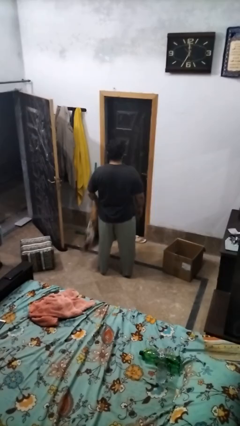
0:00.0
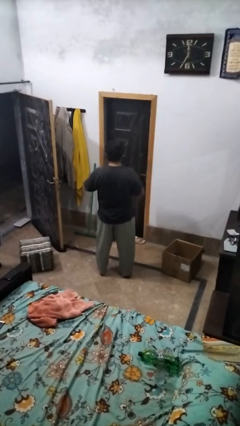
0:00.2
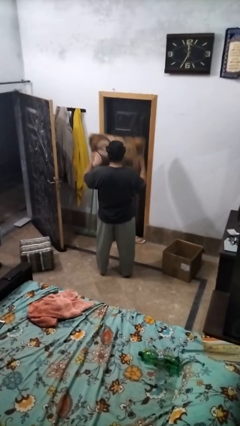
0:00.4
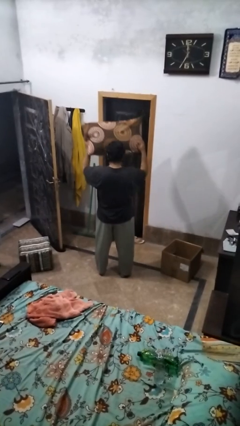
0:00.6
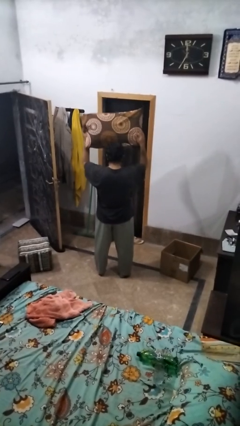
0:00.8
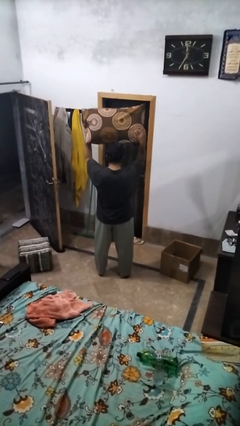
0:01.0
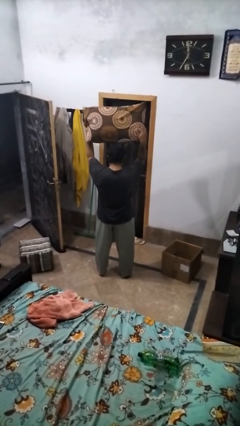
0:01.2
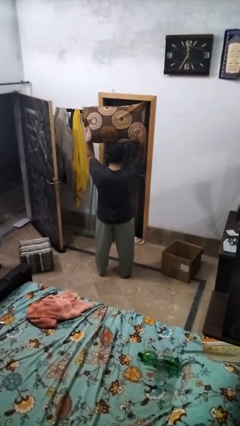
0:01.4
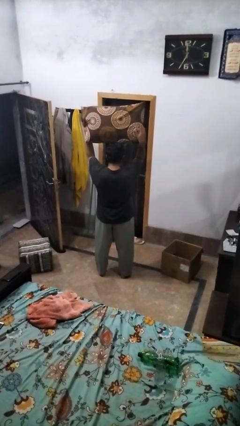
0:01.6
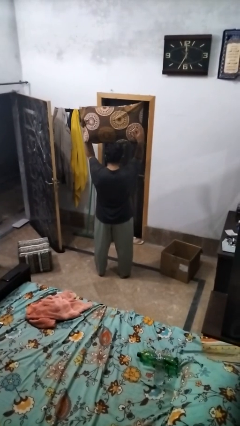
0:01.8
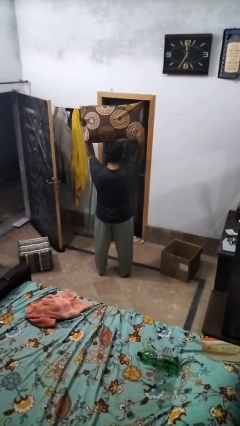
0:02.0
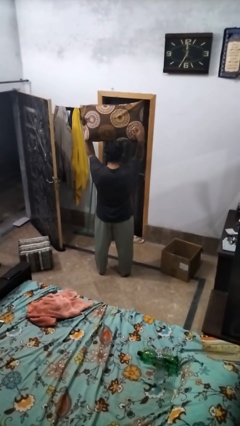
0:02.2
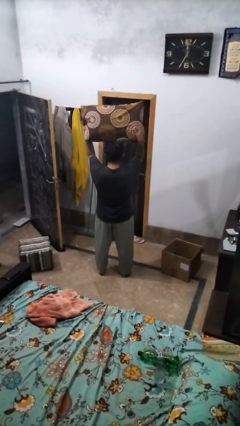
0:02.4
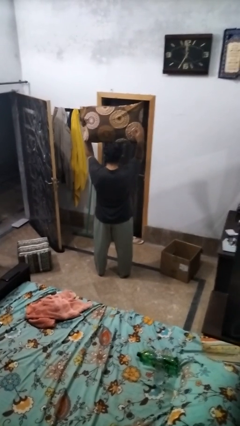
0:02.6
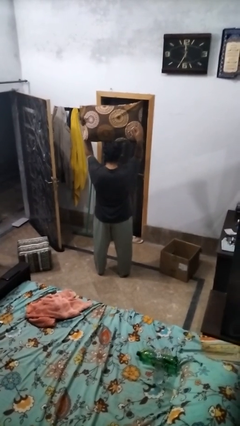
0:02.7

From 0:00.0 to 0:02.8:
person holds object above head

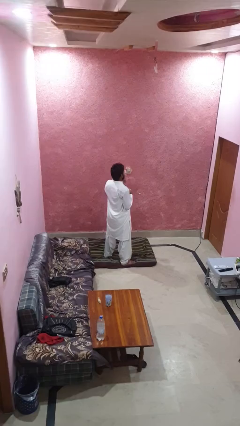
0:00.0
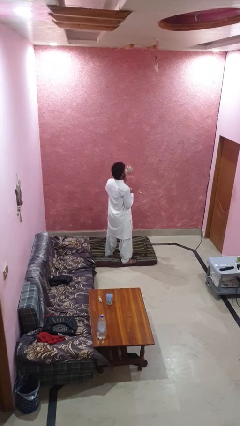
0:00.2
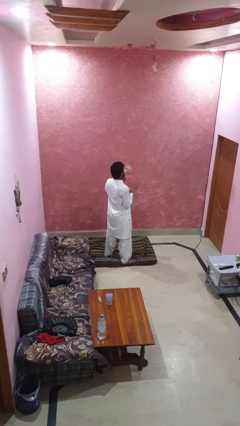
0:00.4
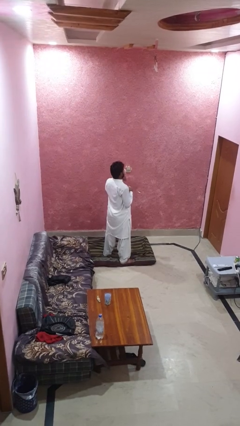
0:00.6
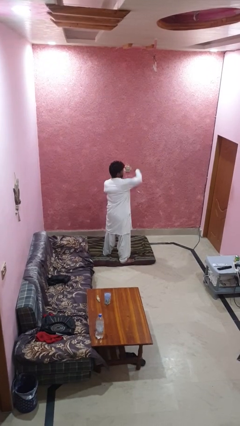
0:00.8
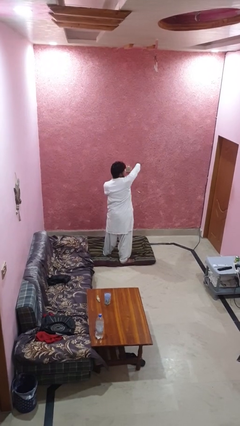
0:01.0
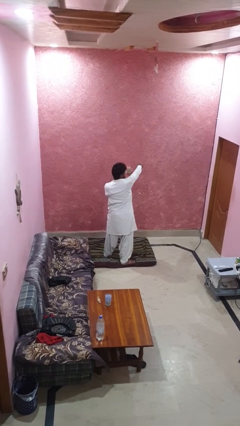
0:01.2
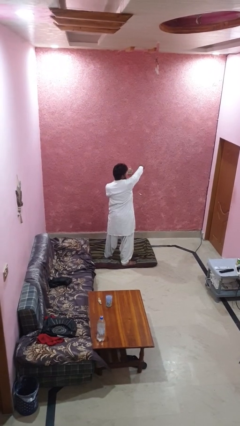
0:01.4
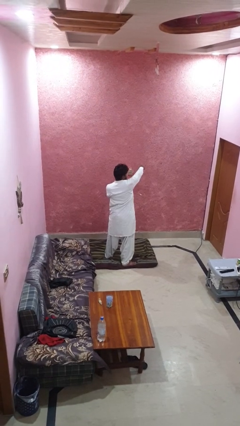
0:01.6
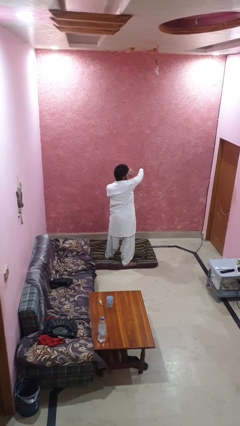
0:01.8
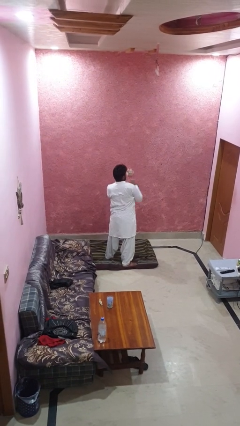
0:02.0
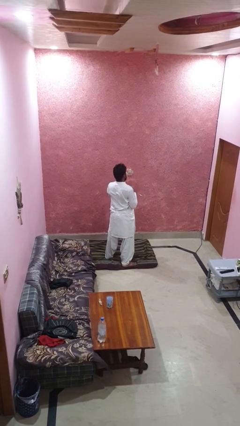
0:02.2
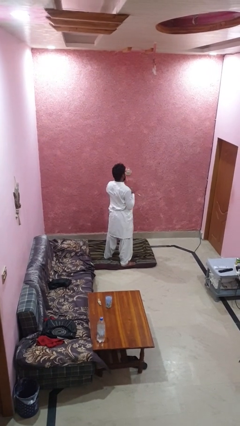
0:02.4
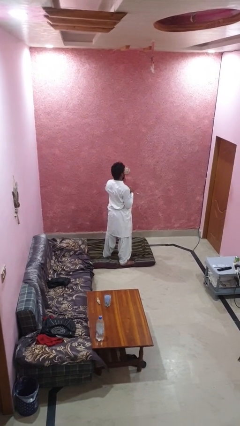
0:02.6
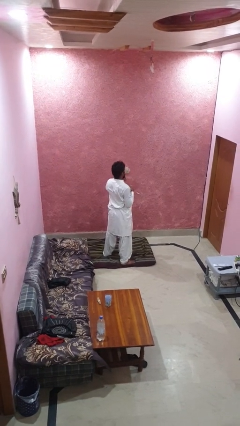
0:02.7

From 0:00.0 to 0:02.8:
person punches

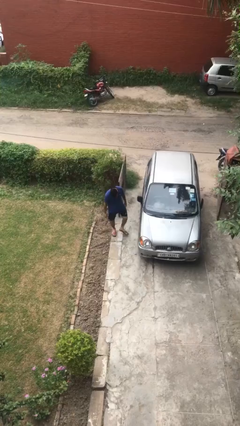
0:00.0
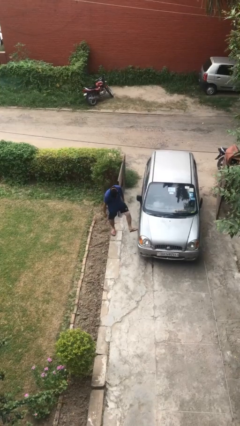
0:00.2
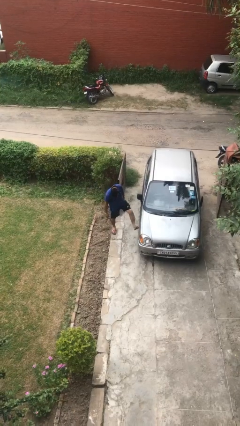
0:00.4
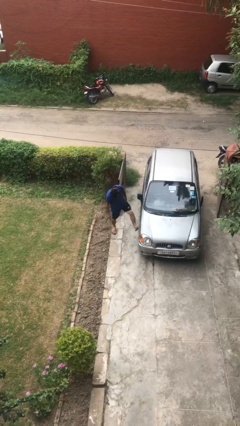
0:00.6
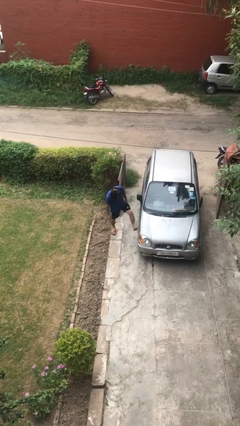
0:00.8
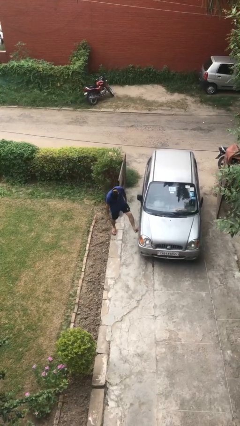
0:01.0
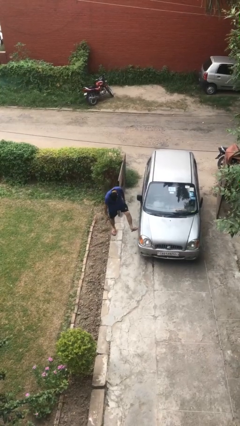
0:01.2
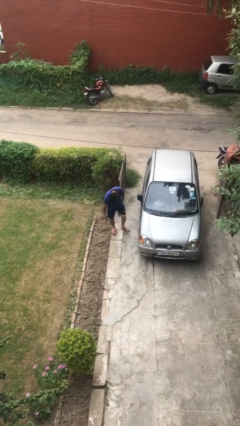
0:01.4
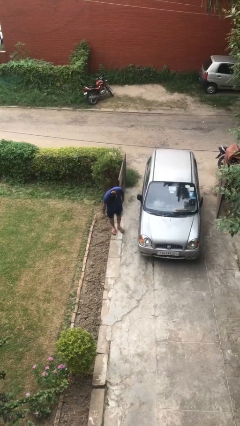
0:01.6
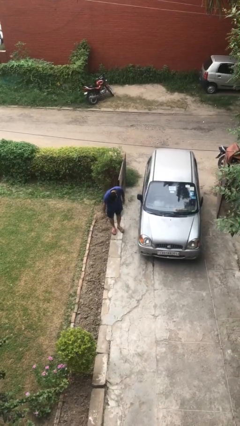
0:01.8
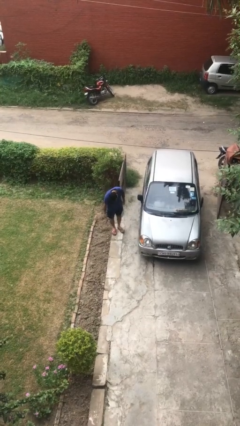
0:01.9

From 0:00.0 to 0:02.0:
person kicks car tires

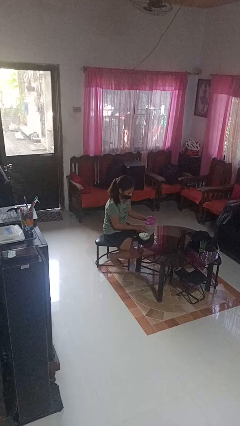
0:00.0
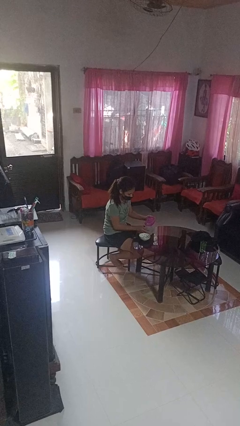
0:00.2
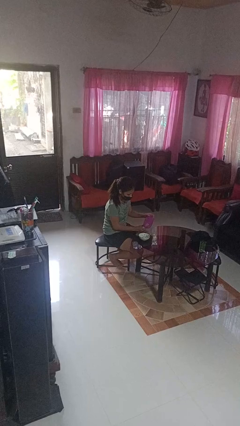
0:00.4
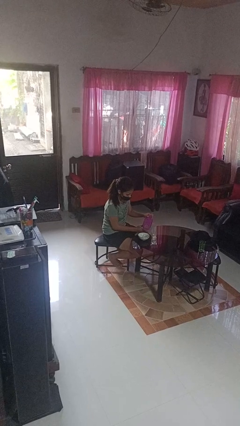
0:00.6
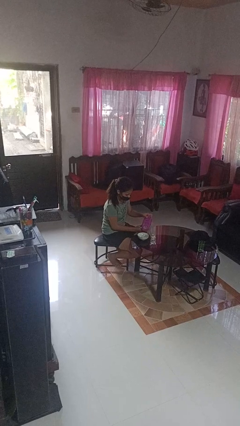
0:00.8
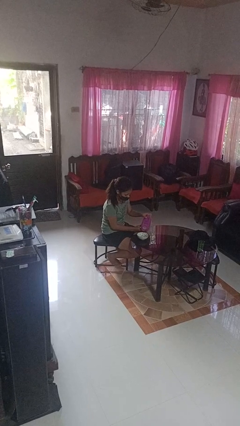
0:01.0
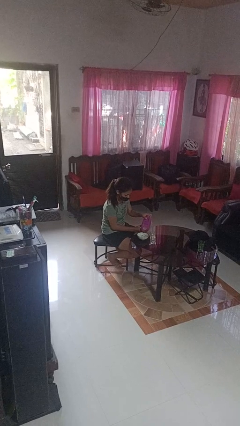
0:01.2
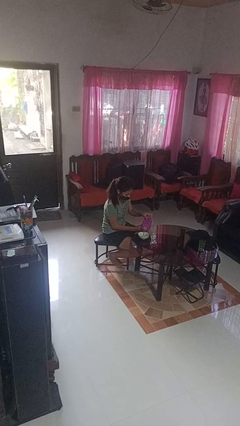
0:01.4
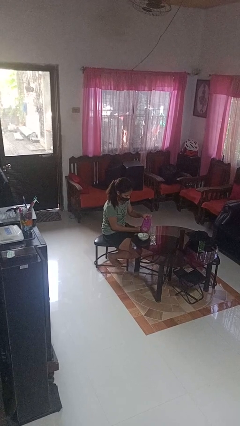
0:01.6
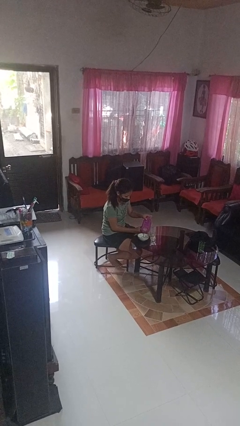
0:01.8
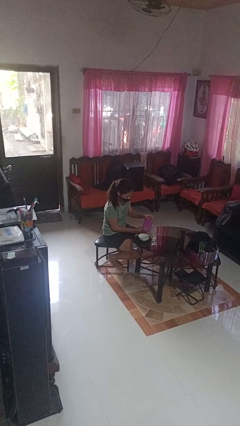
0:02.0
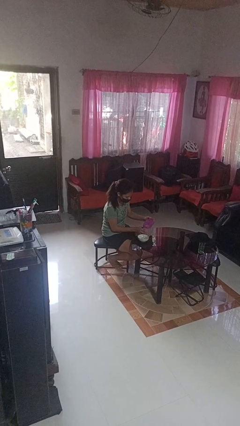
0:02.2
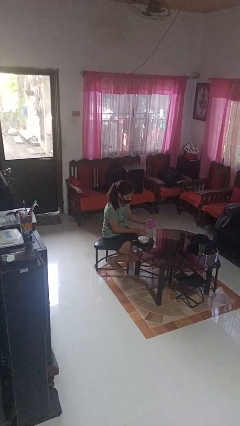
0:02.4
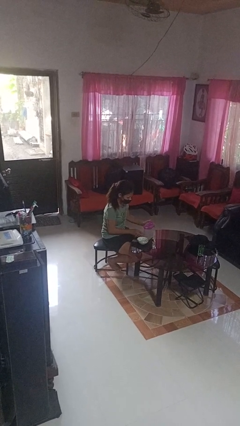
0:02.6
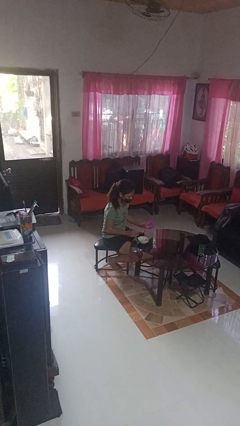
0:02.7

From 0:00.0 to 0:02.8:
person pours into bowl

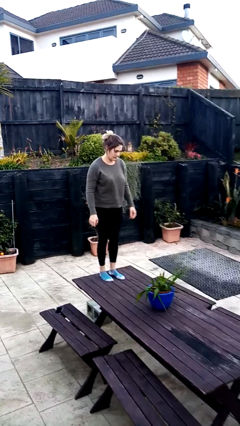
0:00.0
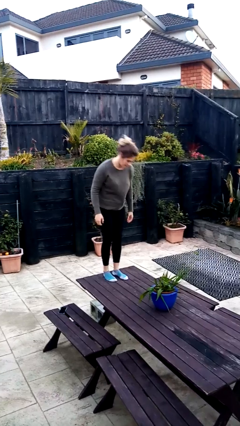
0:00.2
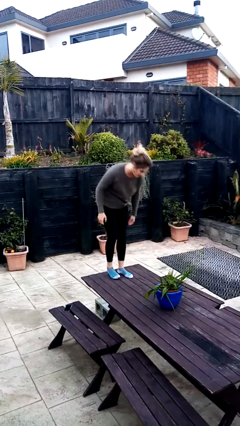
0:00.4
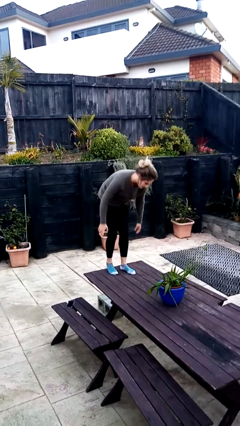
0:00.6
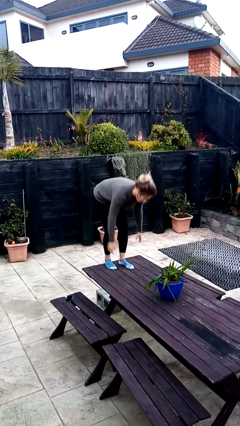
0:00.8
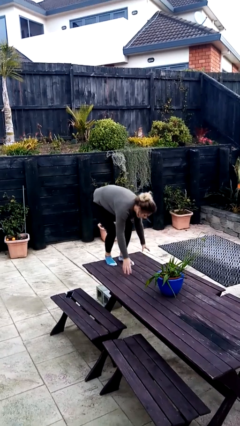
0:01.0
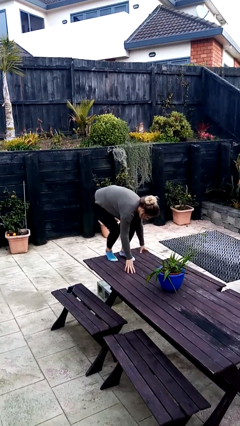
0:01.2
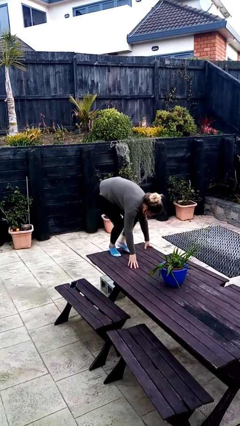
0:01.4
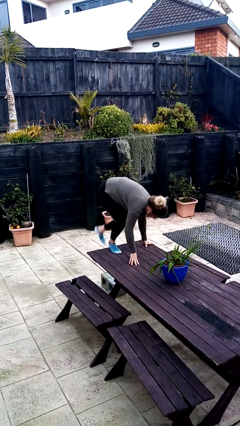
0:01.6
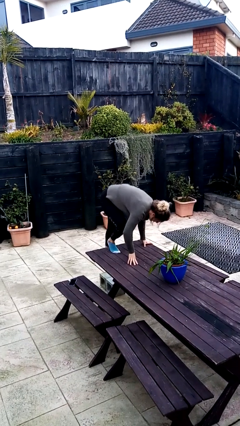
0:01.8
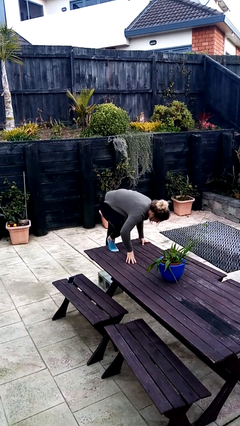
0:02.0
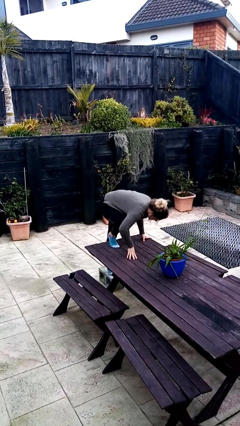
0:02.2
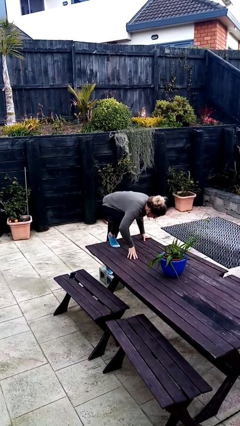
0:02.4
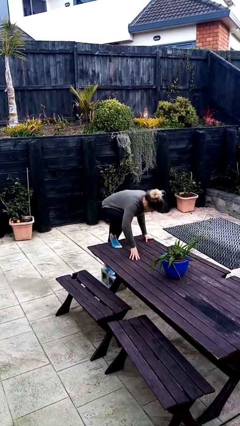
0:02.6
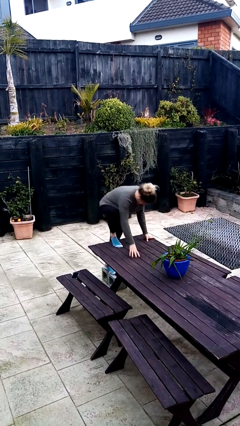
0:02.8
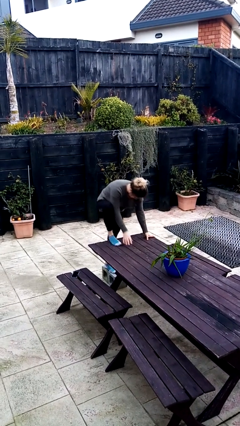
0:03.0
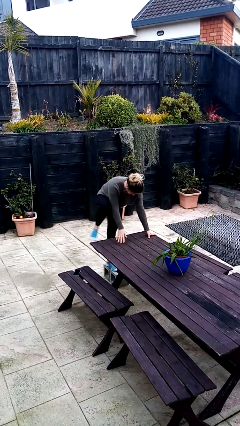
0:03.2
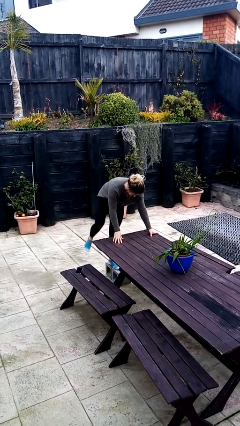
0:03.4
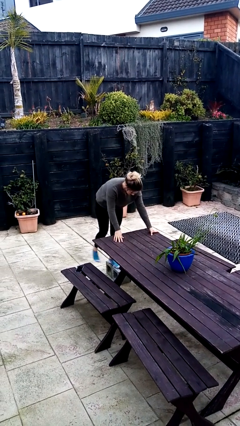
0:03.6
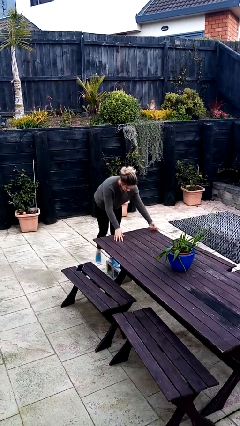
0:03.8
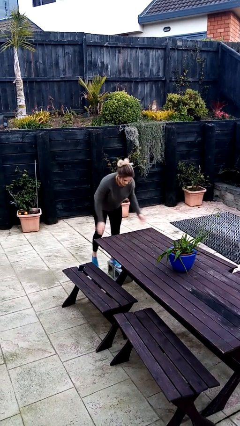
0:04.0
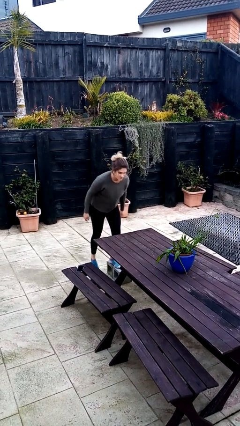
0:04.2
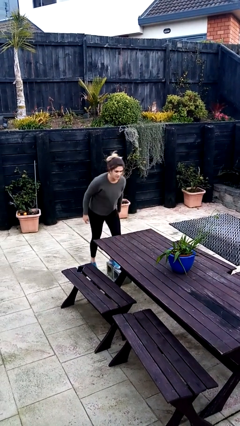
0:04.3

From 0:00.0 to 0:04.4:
person climbs off table

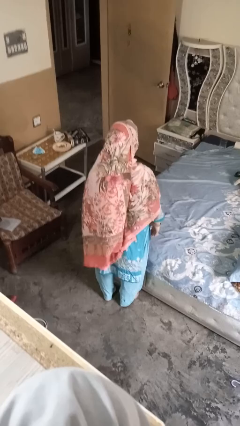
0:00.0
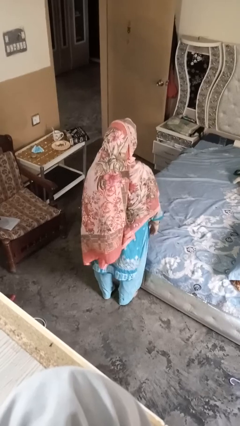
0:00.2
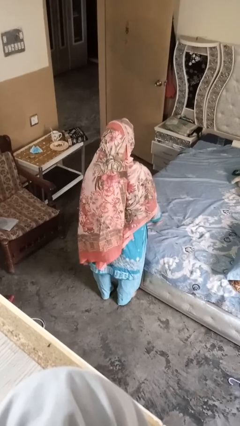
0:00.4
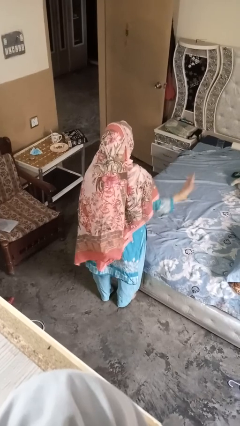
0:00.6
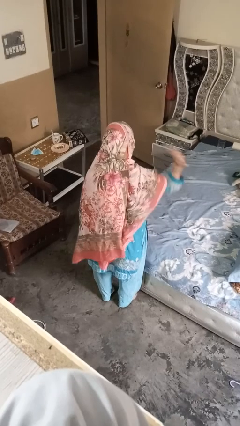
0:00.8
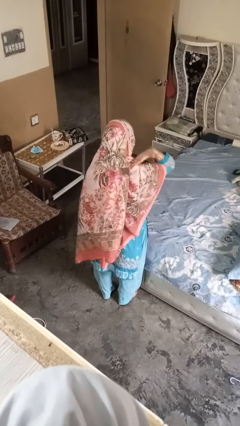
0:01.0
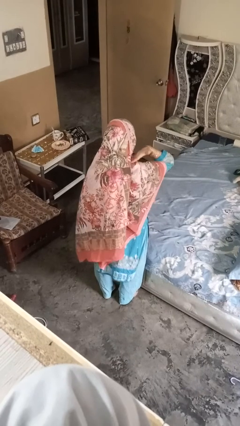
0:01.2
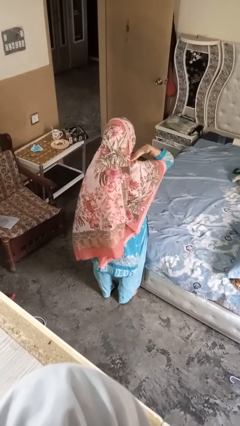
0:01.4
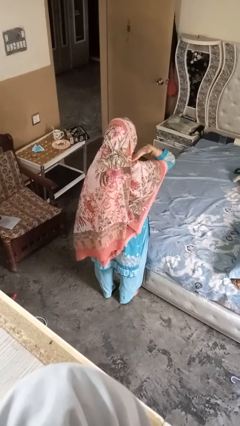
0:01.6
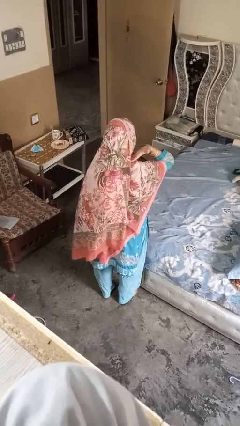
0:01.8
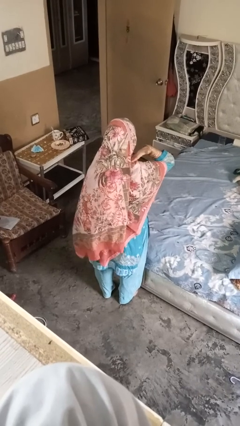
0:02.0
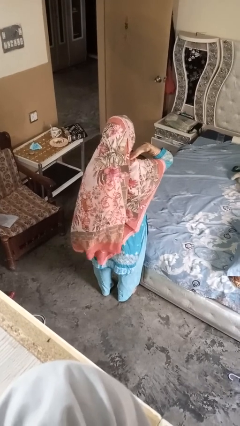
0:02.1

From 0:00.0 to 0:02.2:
person gestures cut

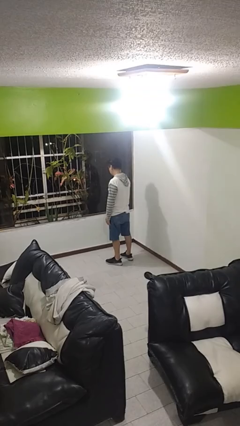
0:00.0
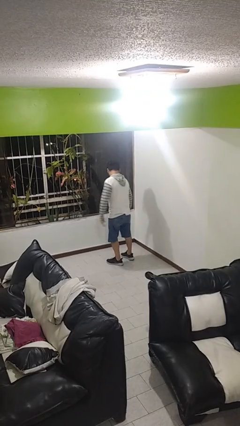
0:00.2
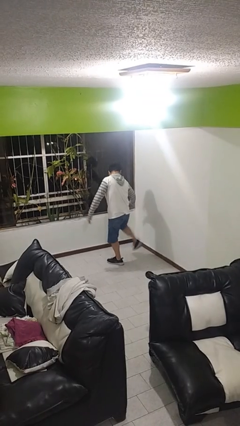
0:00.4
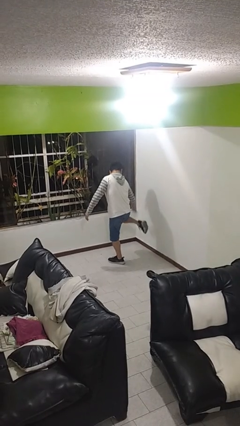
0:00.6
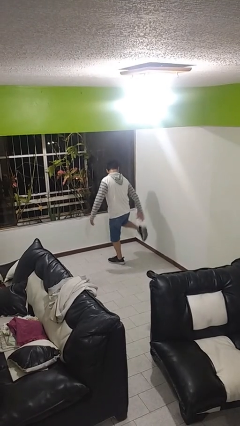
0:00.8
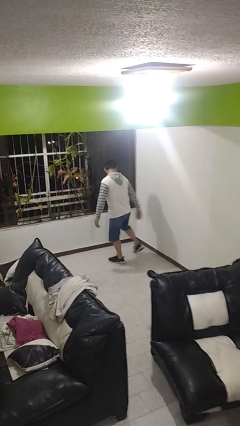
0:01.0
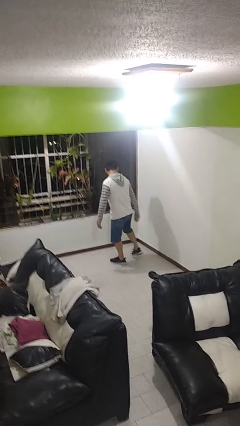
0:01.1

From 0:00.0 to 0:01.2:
person swats bug
